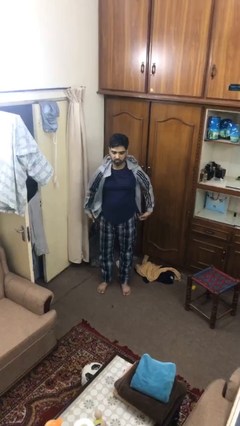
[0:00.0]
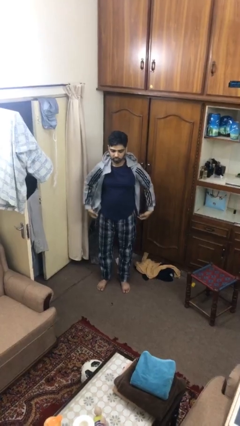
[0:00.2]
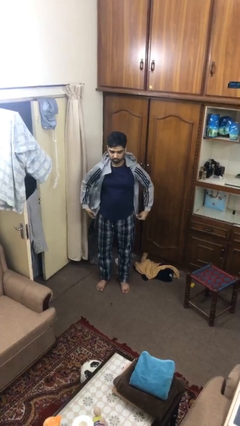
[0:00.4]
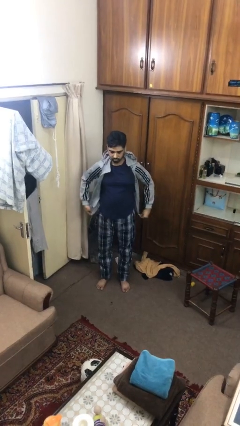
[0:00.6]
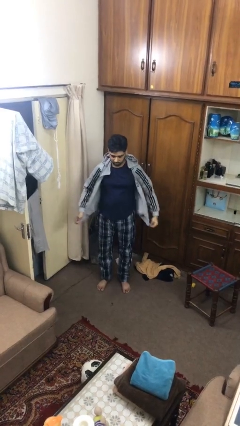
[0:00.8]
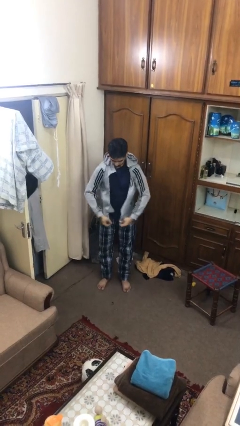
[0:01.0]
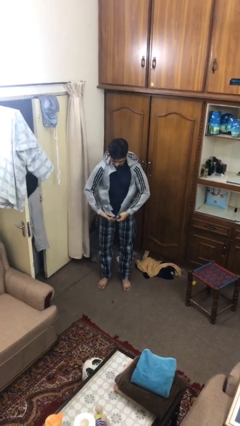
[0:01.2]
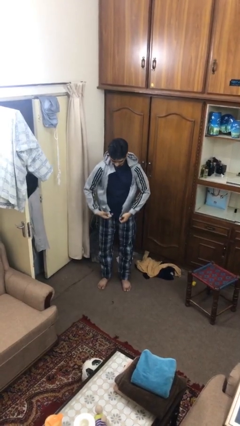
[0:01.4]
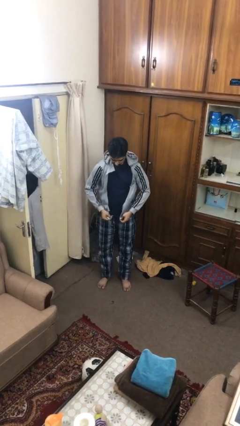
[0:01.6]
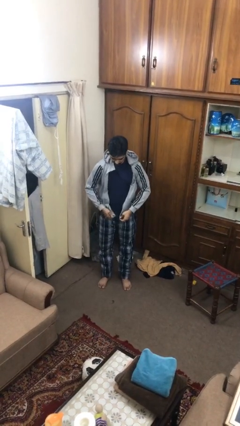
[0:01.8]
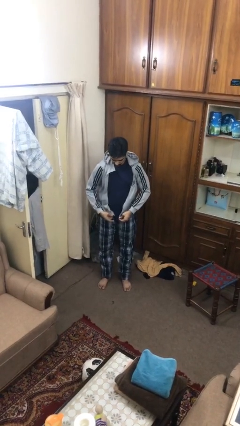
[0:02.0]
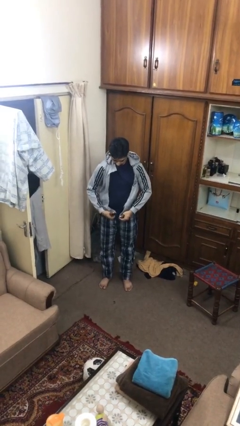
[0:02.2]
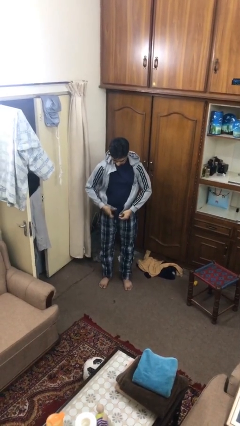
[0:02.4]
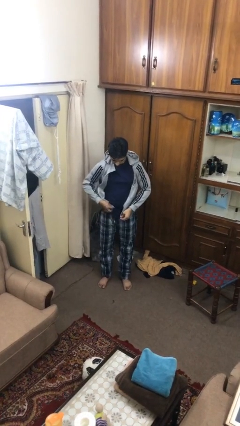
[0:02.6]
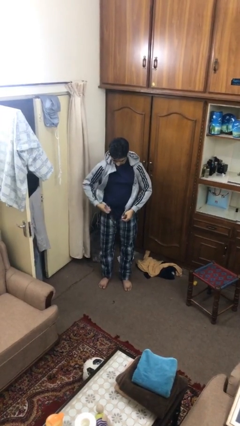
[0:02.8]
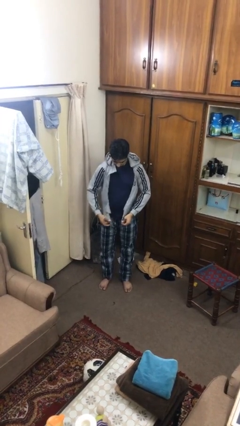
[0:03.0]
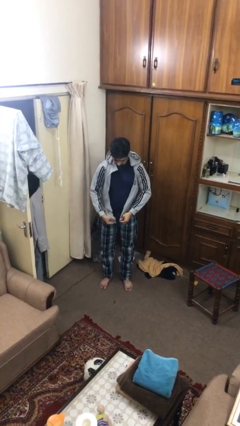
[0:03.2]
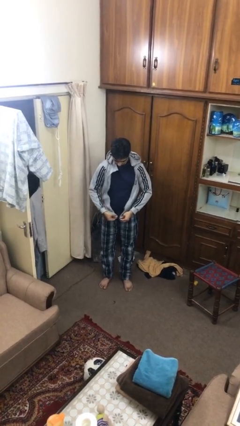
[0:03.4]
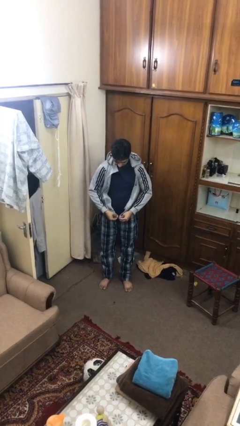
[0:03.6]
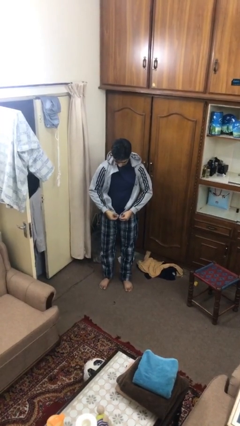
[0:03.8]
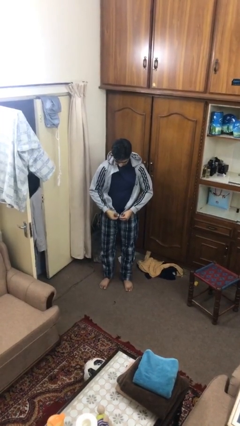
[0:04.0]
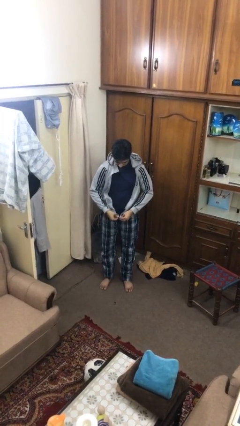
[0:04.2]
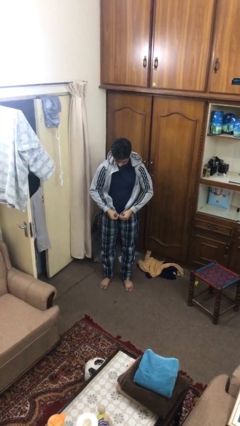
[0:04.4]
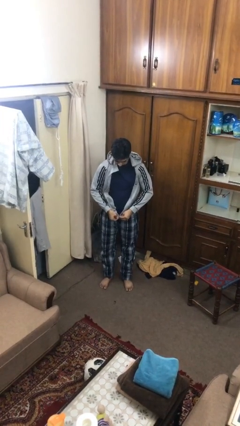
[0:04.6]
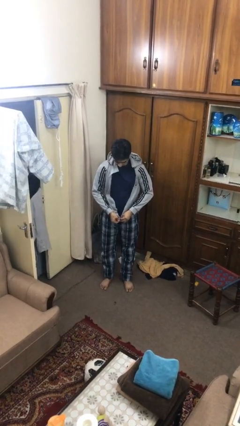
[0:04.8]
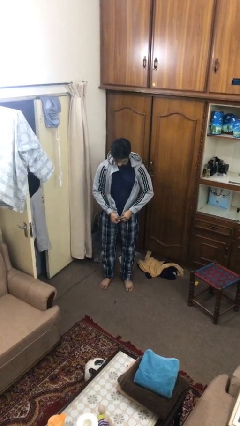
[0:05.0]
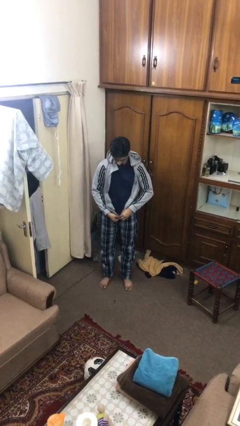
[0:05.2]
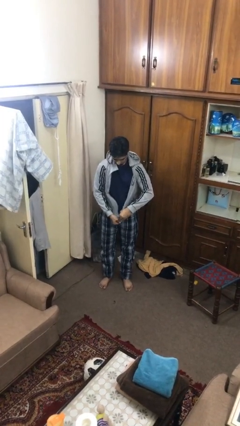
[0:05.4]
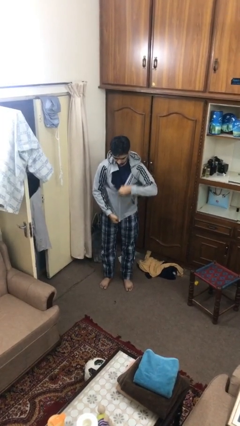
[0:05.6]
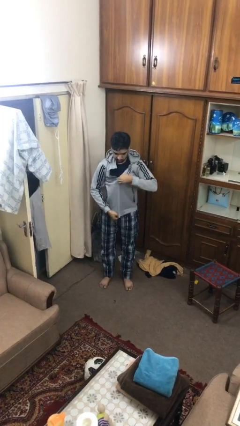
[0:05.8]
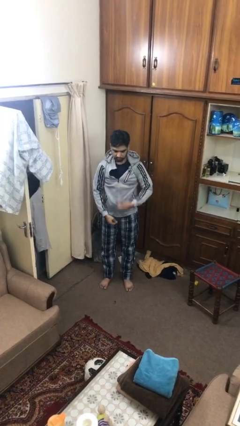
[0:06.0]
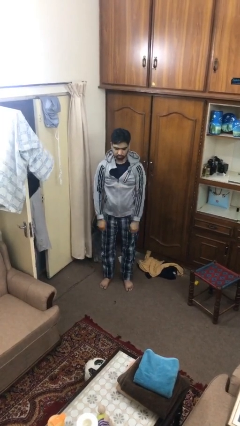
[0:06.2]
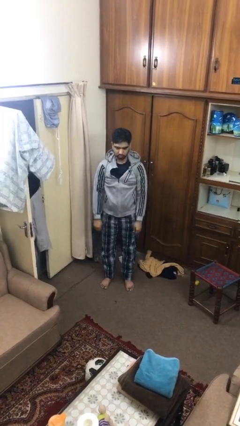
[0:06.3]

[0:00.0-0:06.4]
person zips up jacket

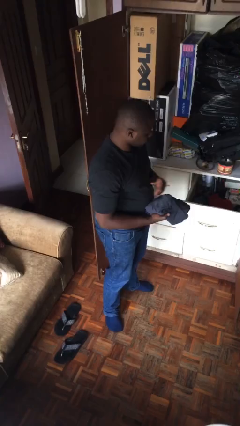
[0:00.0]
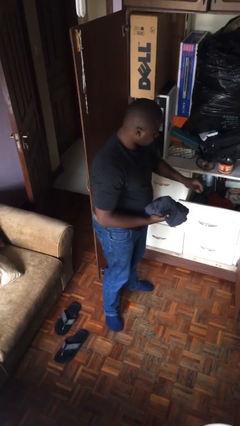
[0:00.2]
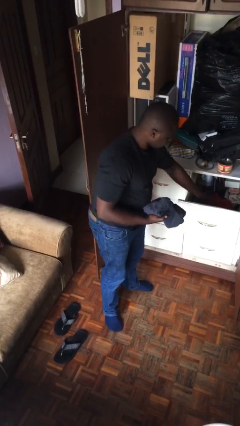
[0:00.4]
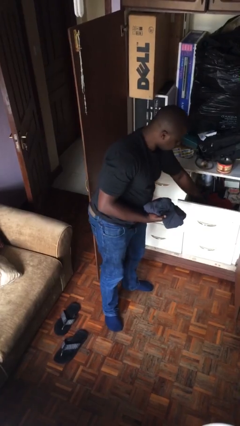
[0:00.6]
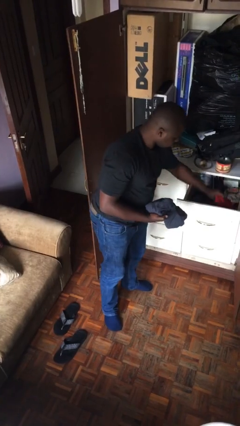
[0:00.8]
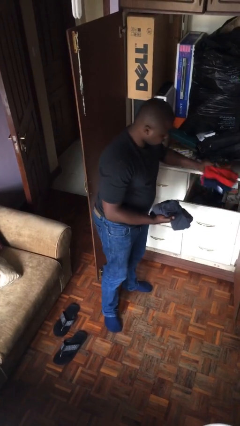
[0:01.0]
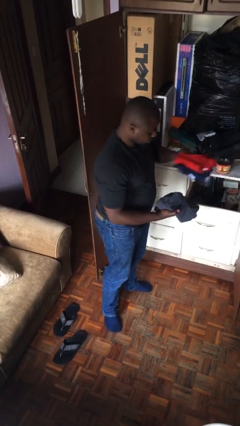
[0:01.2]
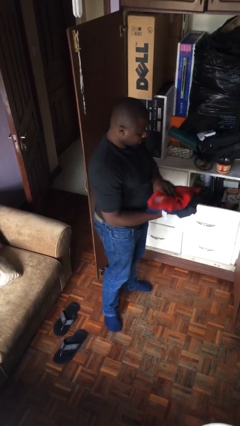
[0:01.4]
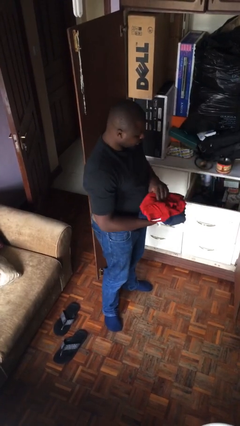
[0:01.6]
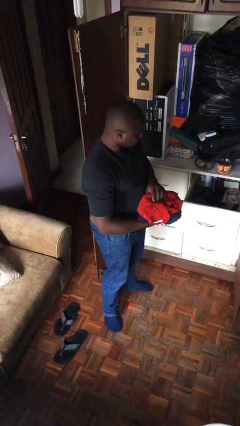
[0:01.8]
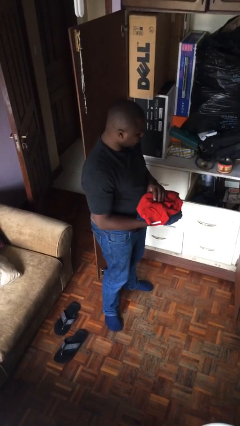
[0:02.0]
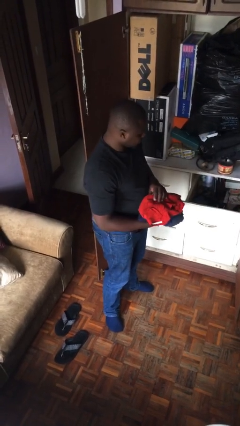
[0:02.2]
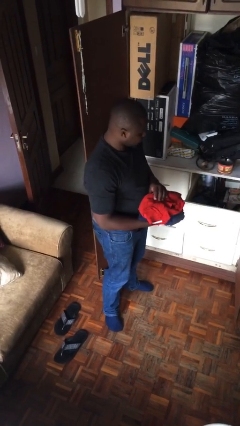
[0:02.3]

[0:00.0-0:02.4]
person takes clothes from dresser

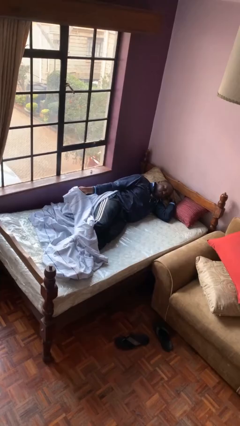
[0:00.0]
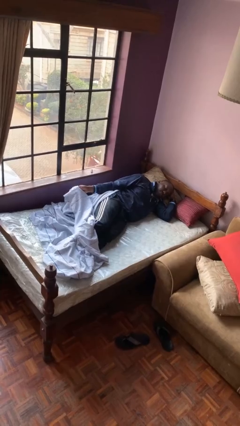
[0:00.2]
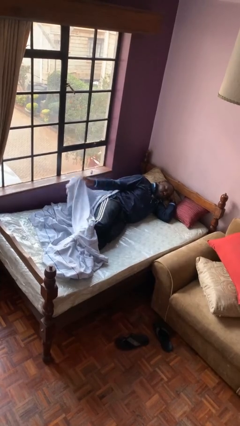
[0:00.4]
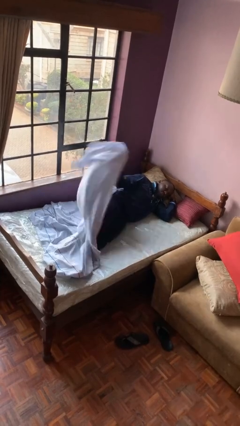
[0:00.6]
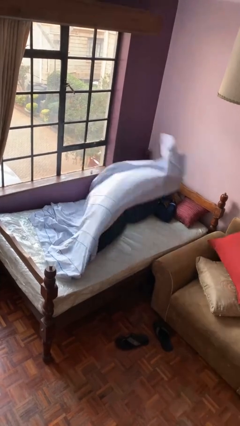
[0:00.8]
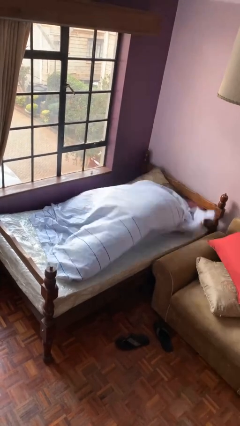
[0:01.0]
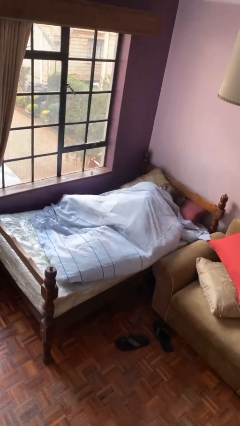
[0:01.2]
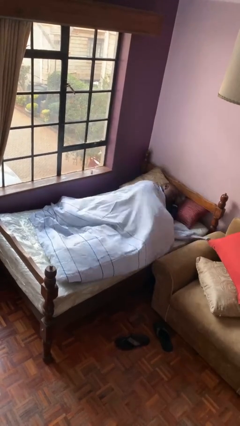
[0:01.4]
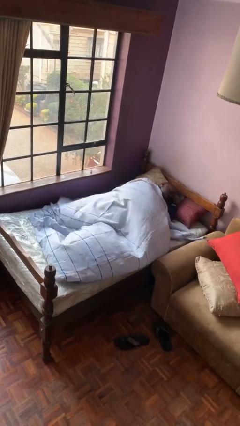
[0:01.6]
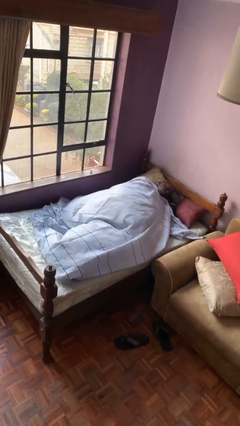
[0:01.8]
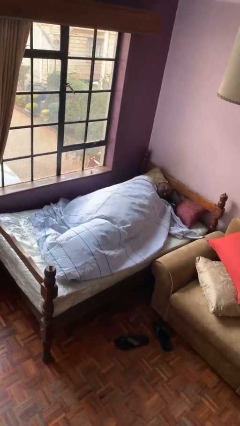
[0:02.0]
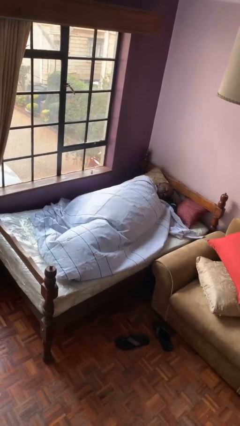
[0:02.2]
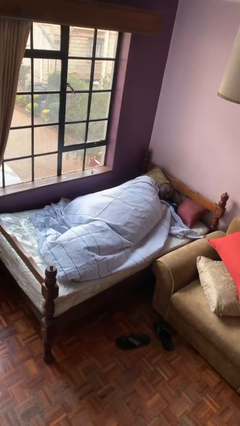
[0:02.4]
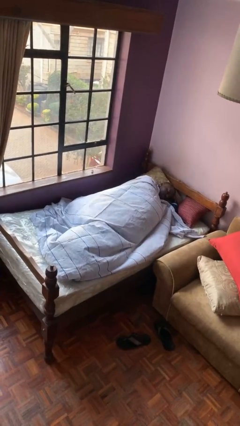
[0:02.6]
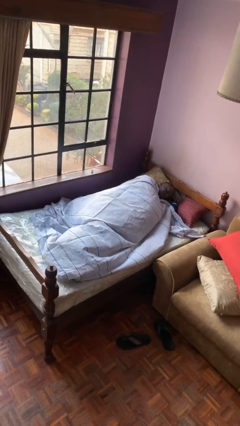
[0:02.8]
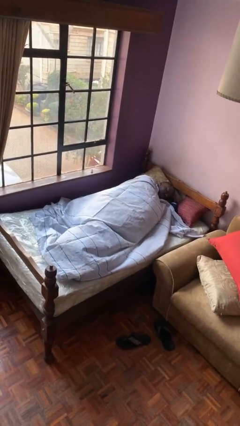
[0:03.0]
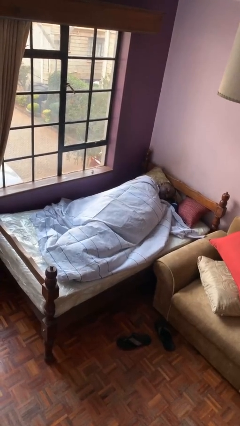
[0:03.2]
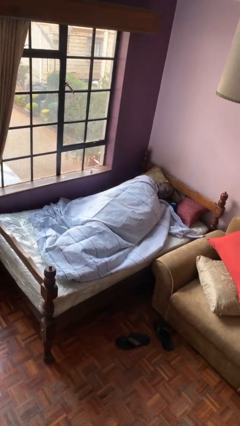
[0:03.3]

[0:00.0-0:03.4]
person covers with bedsheets

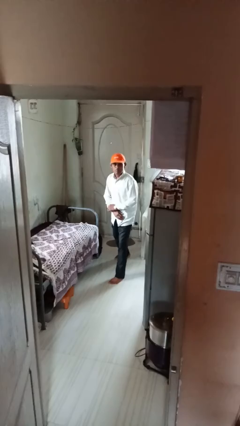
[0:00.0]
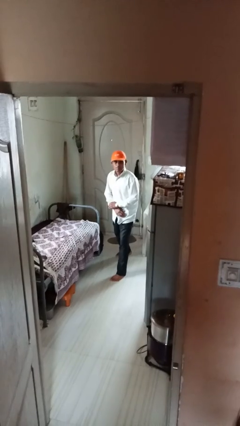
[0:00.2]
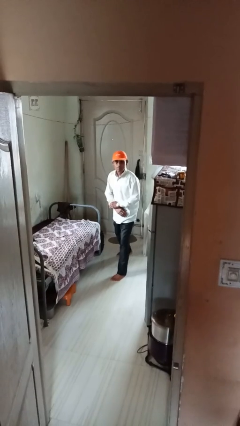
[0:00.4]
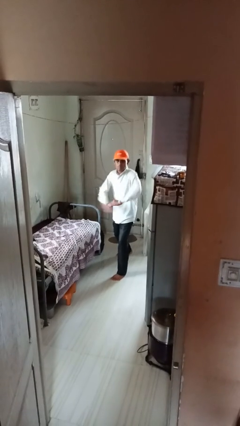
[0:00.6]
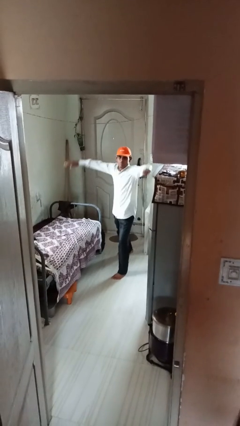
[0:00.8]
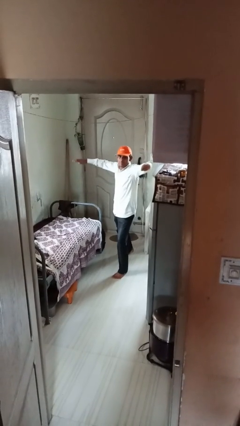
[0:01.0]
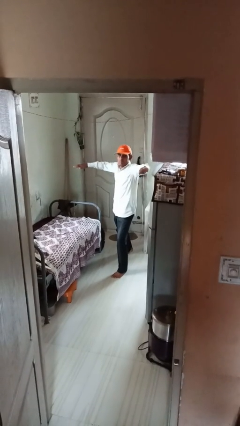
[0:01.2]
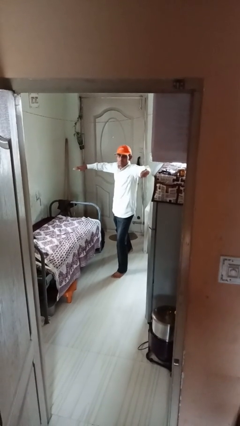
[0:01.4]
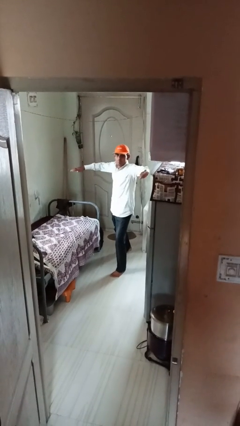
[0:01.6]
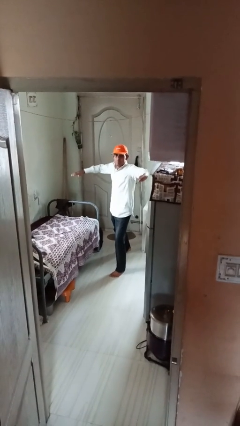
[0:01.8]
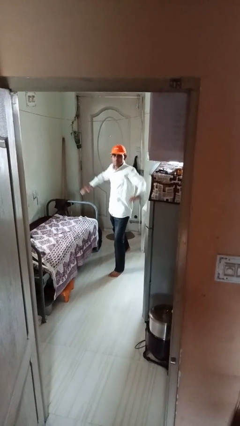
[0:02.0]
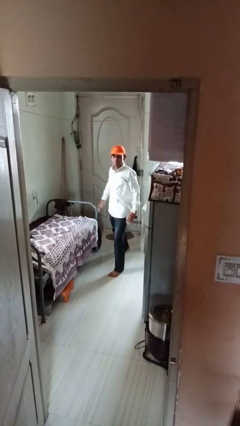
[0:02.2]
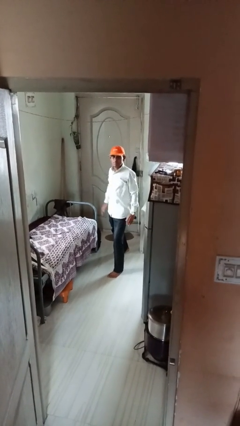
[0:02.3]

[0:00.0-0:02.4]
person karate chop

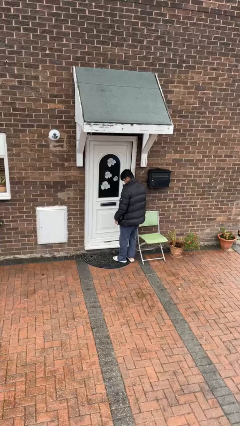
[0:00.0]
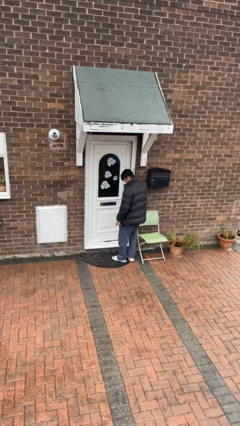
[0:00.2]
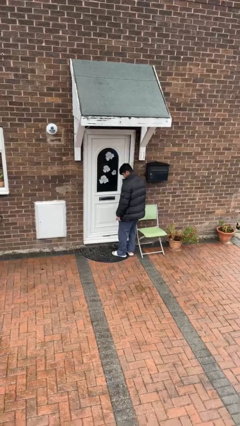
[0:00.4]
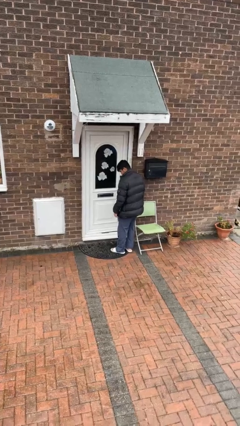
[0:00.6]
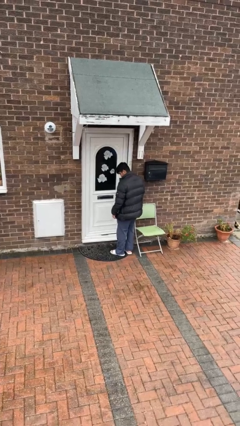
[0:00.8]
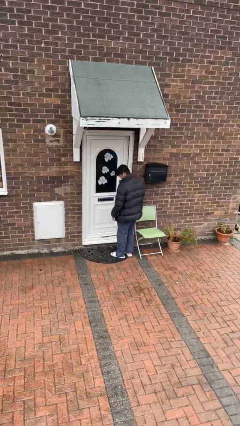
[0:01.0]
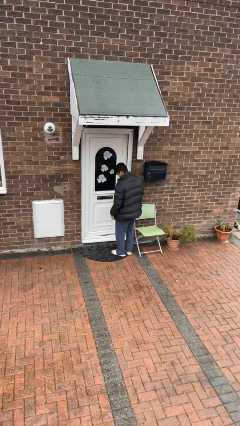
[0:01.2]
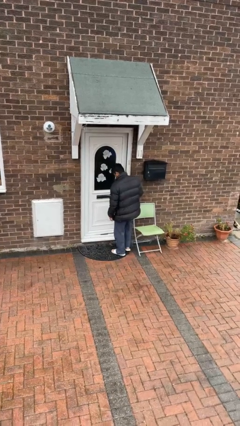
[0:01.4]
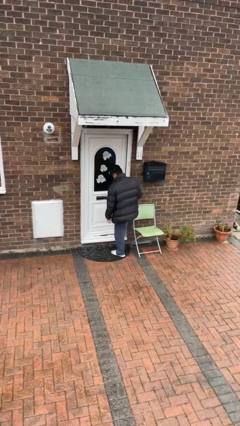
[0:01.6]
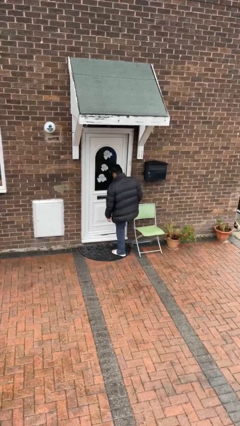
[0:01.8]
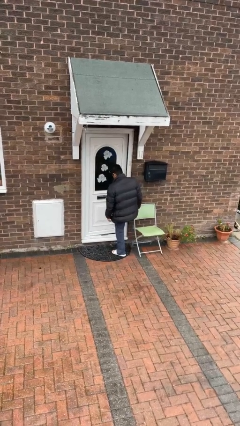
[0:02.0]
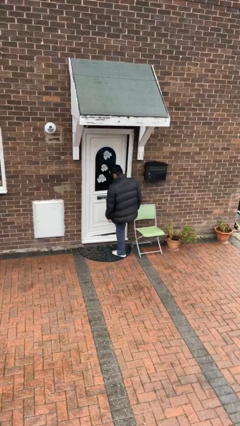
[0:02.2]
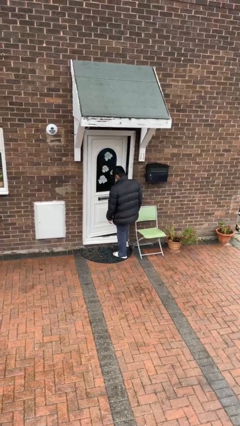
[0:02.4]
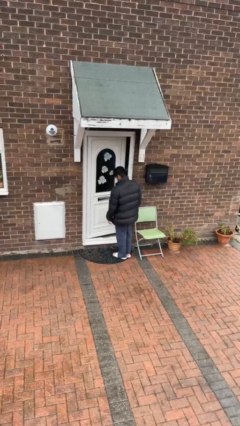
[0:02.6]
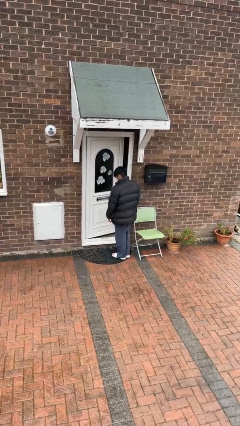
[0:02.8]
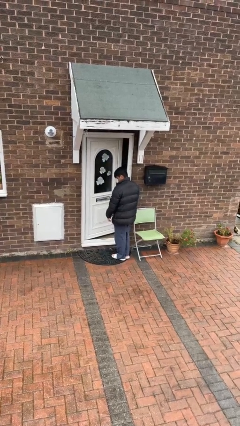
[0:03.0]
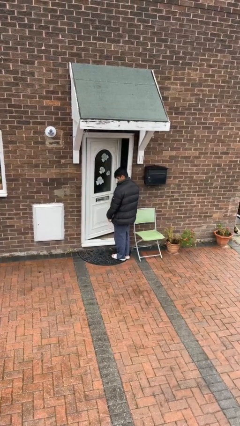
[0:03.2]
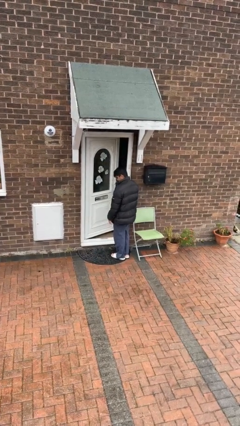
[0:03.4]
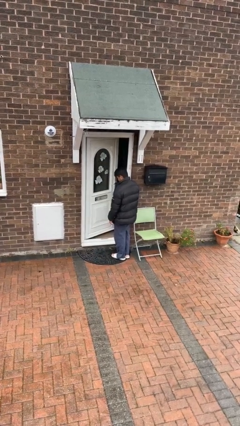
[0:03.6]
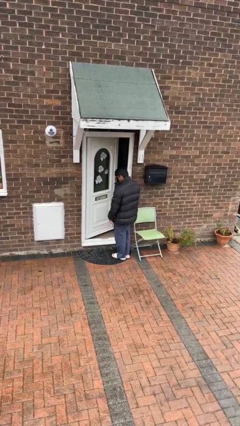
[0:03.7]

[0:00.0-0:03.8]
person opens facility door
